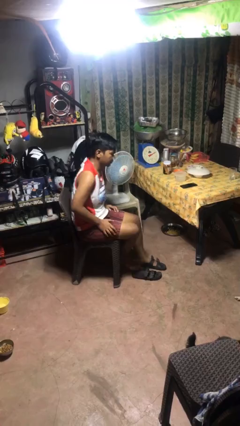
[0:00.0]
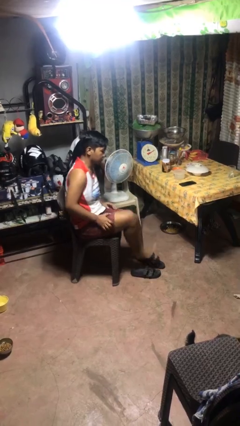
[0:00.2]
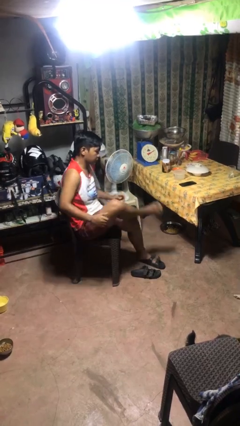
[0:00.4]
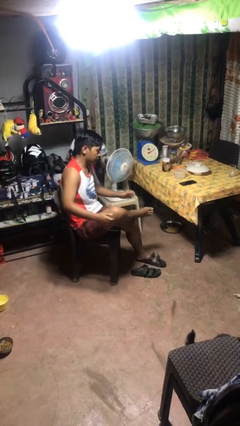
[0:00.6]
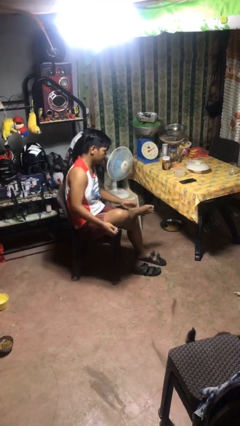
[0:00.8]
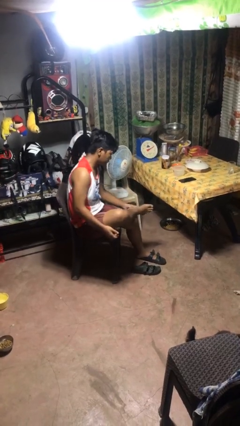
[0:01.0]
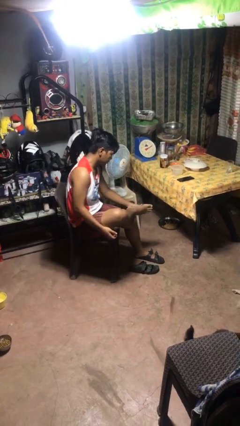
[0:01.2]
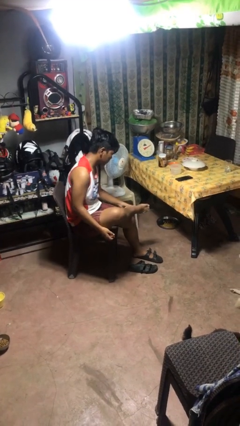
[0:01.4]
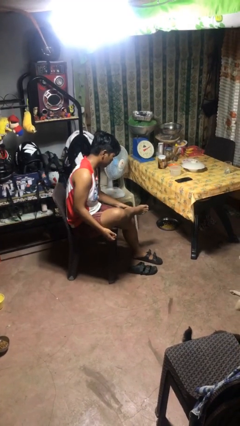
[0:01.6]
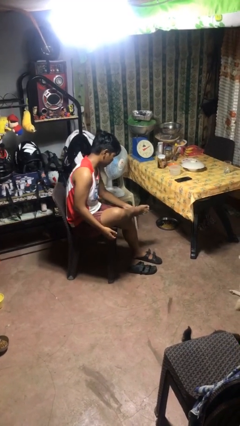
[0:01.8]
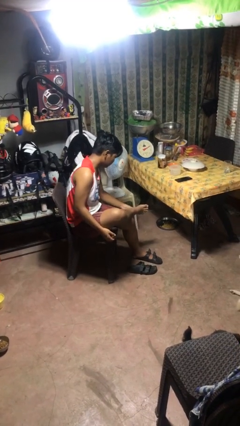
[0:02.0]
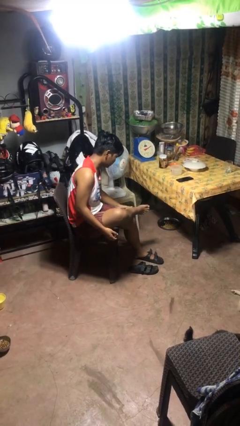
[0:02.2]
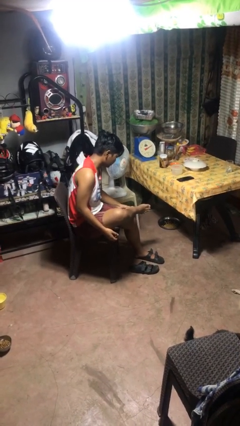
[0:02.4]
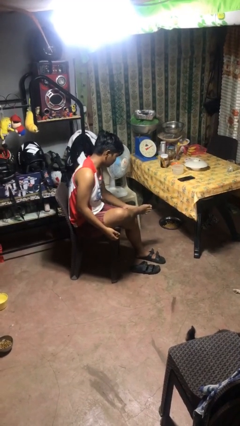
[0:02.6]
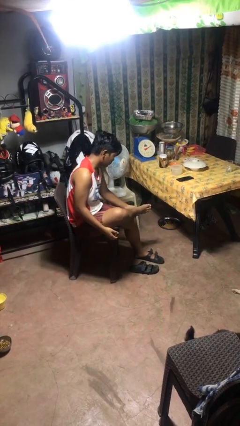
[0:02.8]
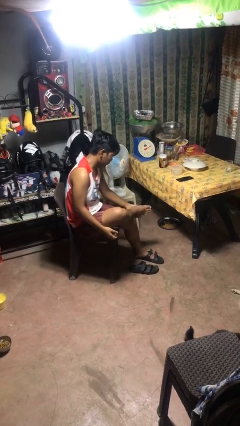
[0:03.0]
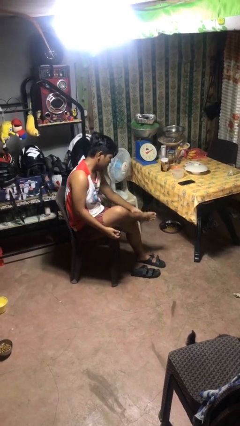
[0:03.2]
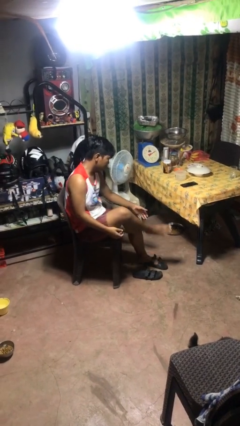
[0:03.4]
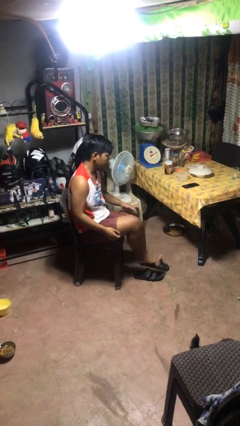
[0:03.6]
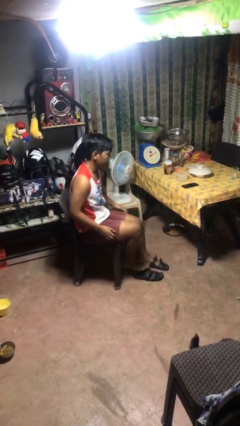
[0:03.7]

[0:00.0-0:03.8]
person rubs foot

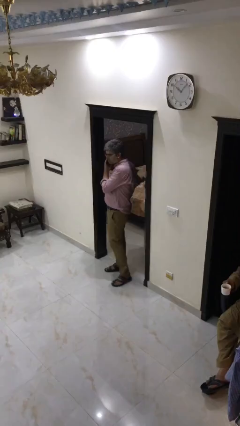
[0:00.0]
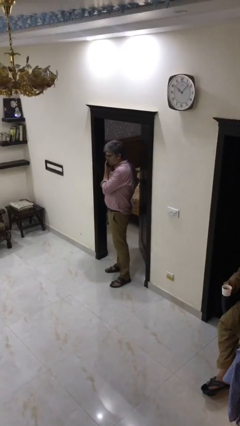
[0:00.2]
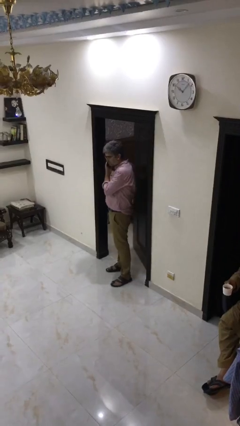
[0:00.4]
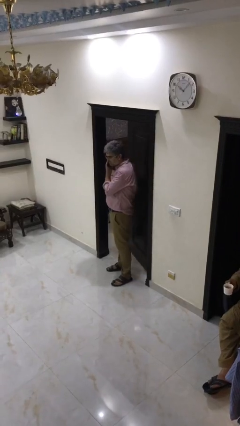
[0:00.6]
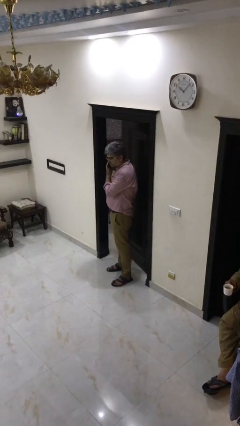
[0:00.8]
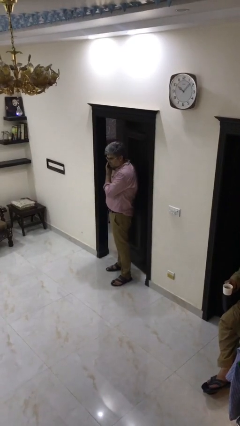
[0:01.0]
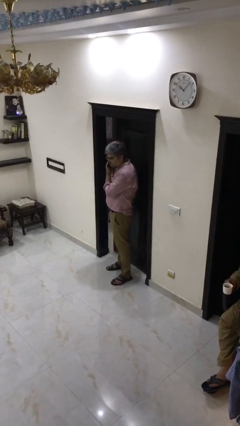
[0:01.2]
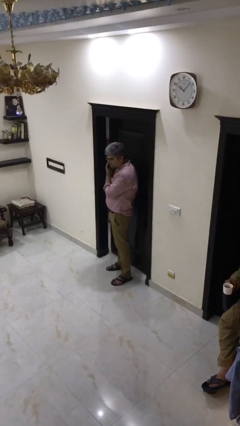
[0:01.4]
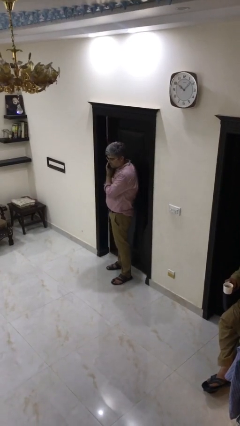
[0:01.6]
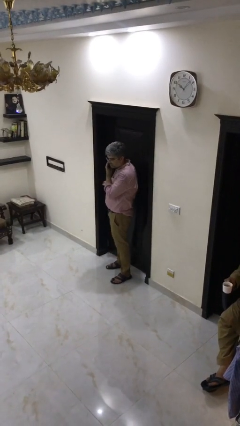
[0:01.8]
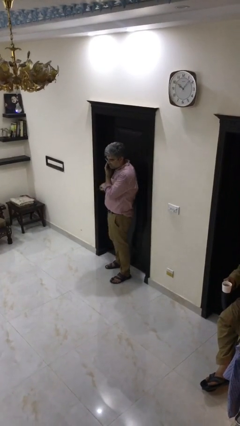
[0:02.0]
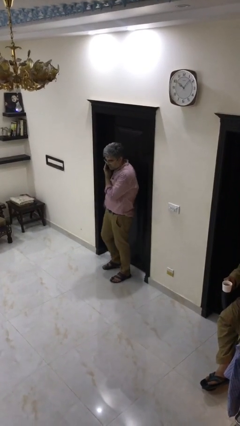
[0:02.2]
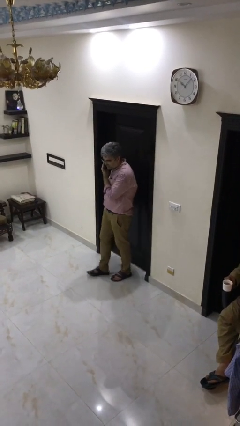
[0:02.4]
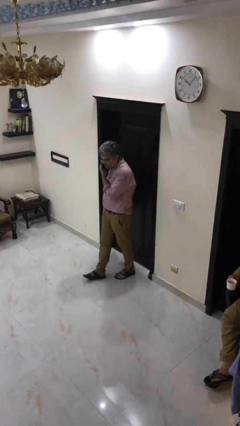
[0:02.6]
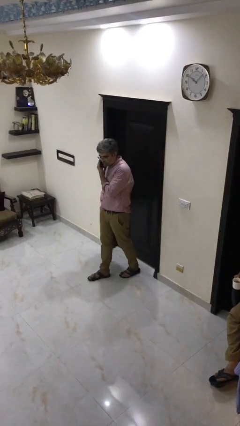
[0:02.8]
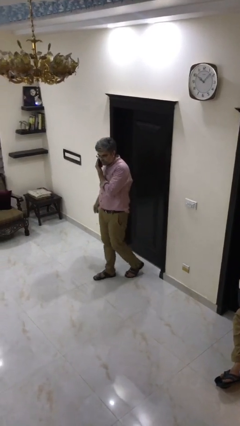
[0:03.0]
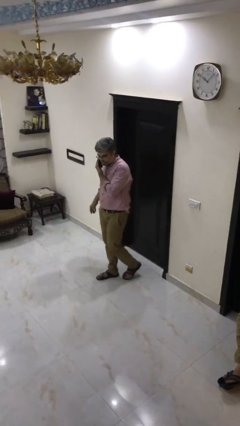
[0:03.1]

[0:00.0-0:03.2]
person closes facility door

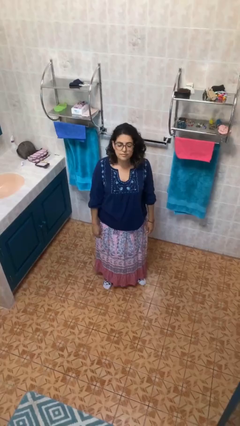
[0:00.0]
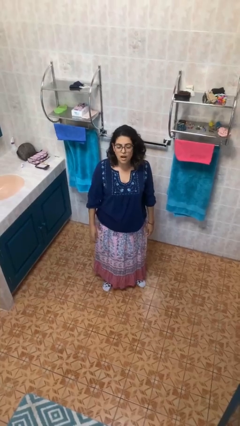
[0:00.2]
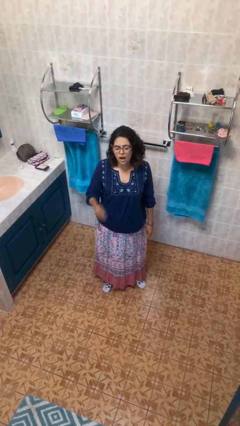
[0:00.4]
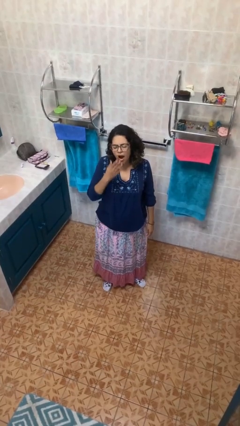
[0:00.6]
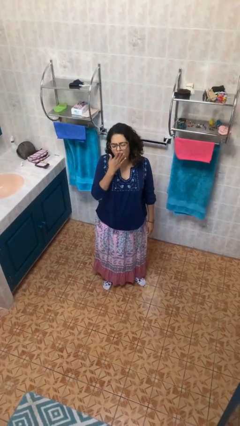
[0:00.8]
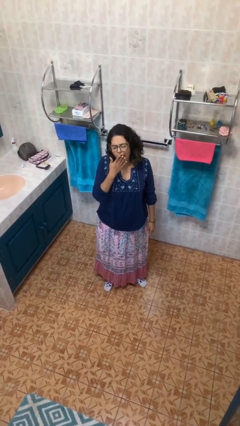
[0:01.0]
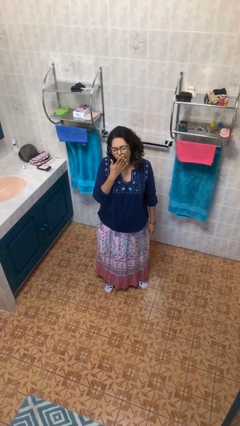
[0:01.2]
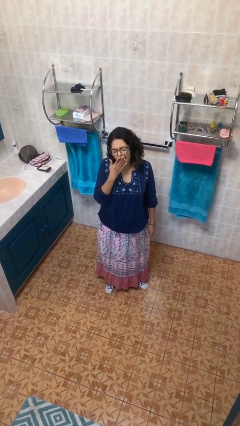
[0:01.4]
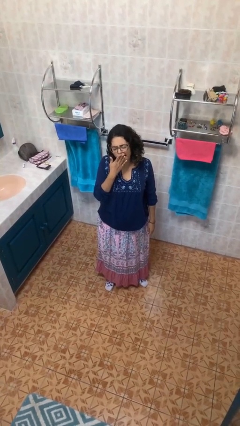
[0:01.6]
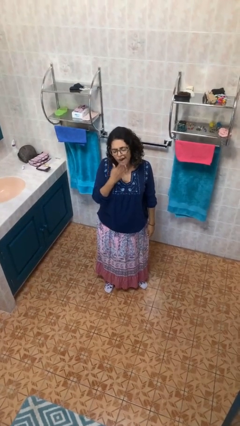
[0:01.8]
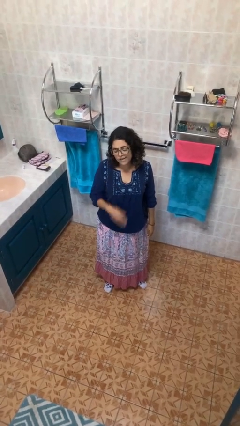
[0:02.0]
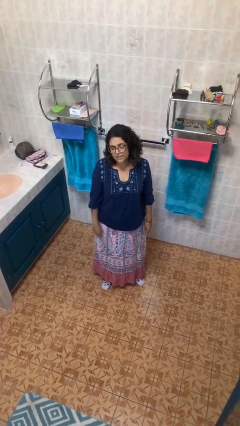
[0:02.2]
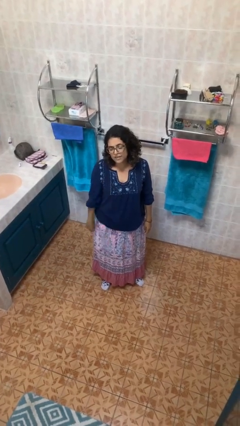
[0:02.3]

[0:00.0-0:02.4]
person yawns

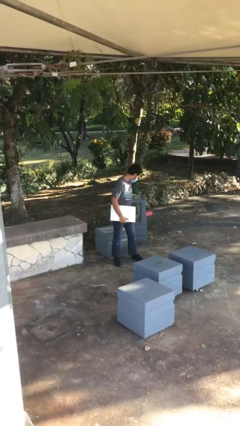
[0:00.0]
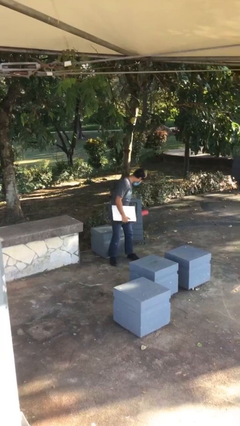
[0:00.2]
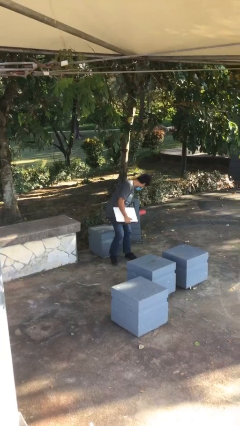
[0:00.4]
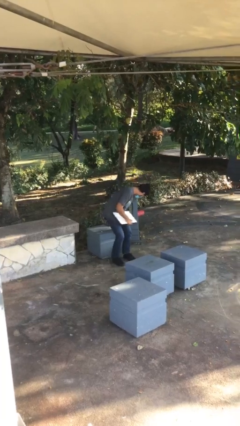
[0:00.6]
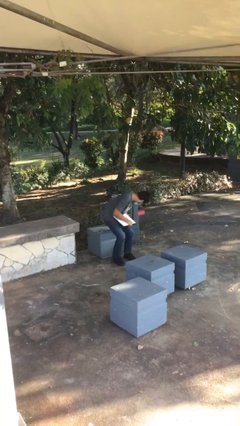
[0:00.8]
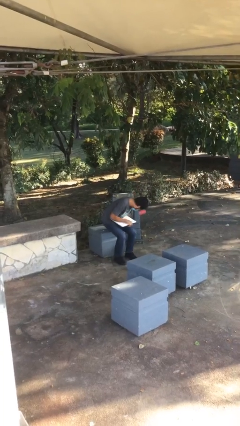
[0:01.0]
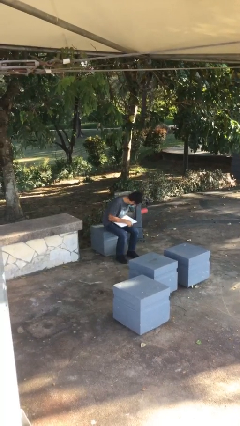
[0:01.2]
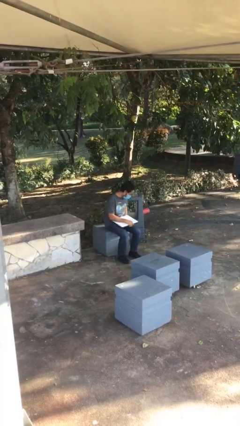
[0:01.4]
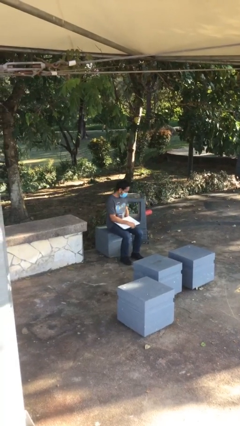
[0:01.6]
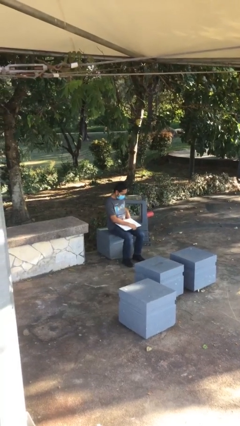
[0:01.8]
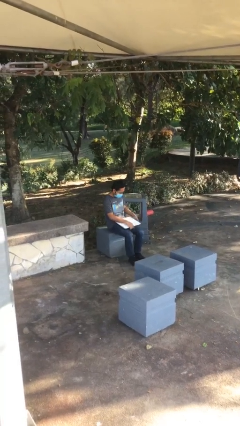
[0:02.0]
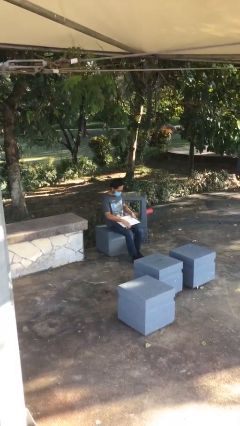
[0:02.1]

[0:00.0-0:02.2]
person sits down

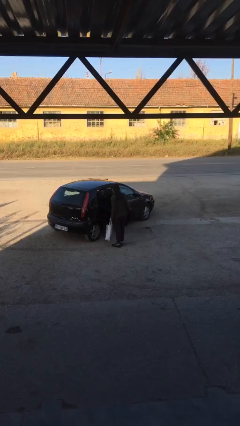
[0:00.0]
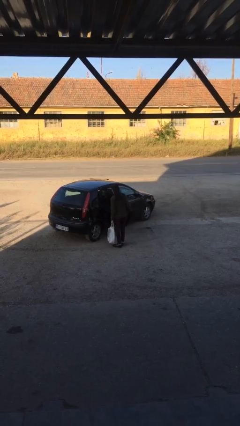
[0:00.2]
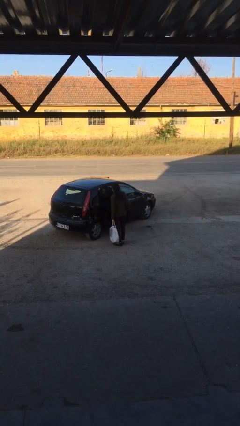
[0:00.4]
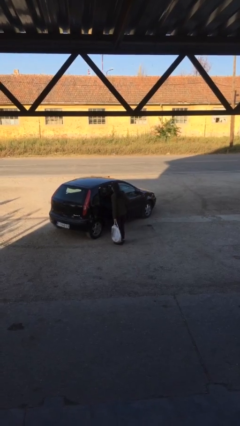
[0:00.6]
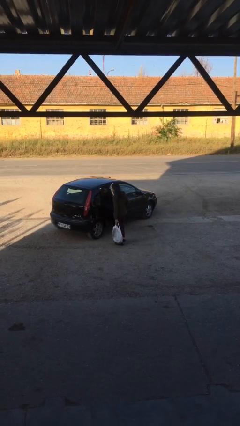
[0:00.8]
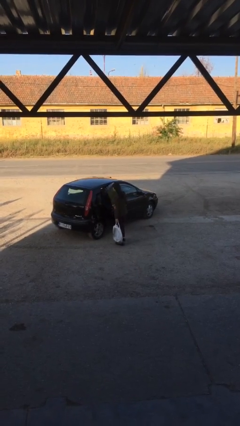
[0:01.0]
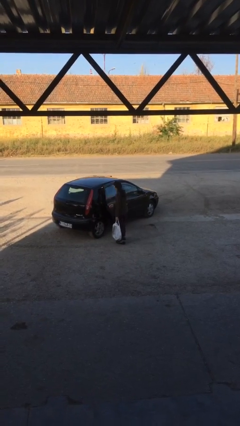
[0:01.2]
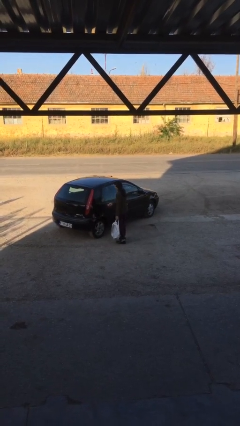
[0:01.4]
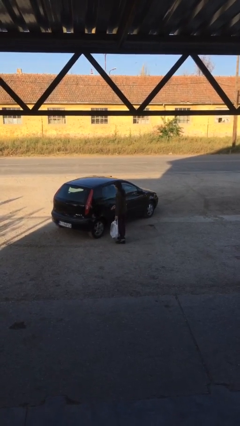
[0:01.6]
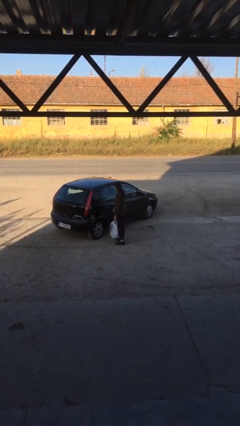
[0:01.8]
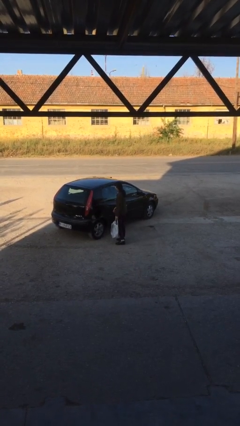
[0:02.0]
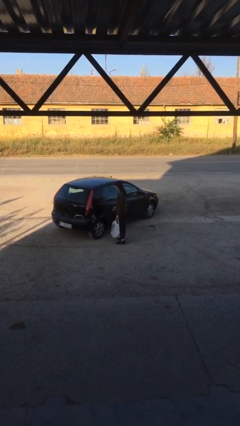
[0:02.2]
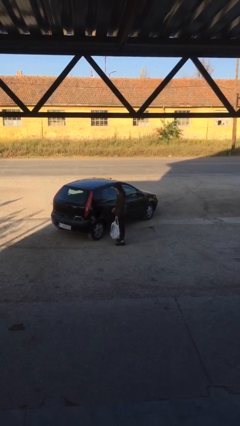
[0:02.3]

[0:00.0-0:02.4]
person closes car door

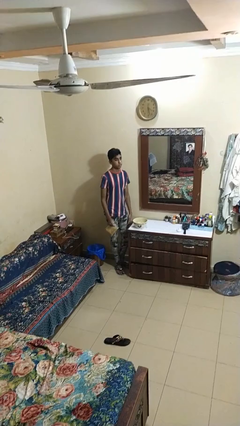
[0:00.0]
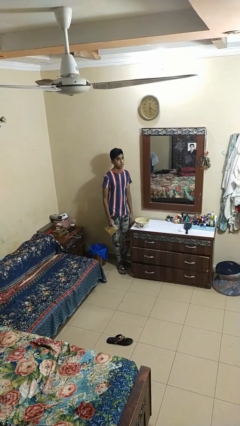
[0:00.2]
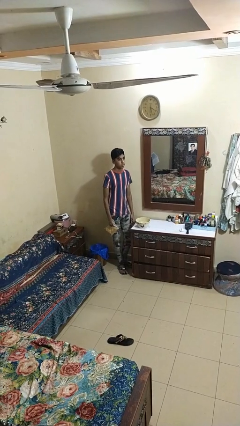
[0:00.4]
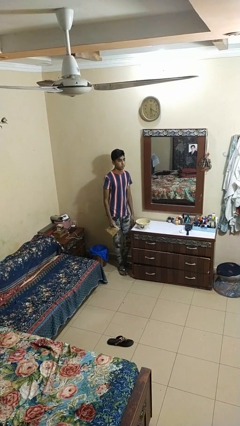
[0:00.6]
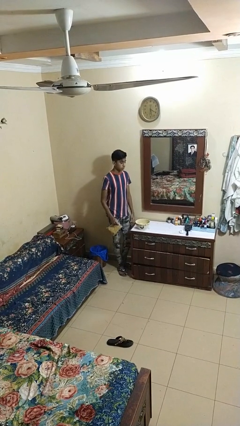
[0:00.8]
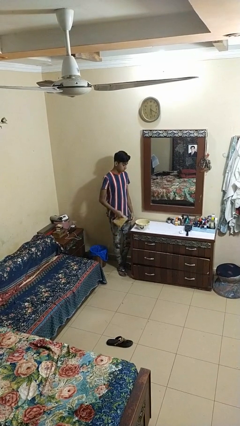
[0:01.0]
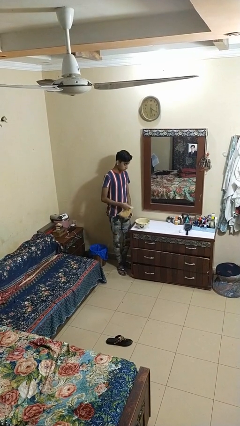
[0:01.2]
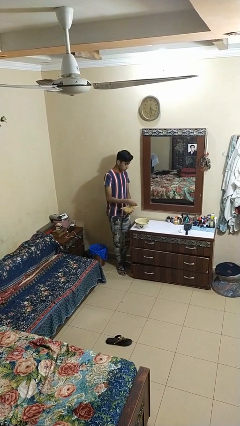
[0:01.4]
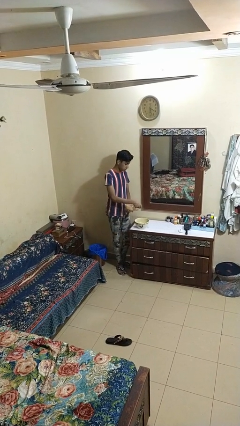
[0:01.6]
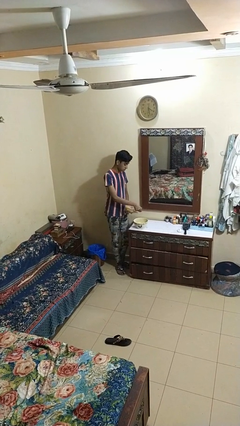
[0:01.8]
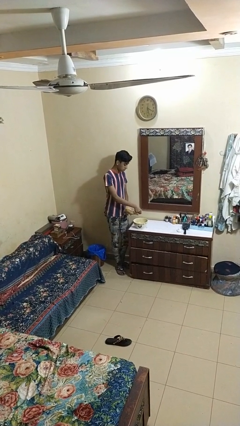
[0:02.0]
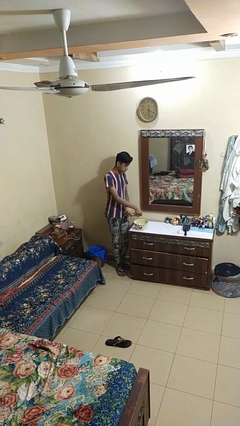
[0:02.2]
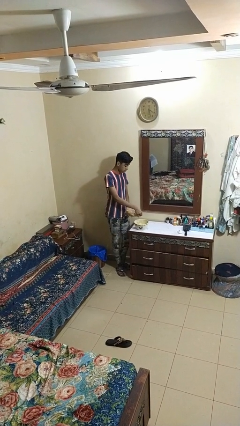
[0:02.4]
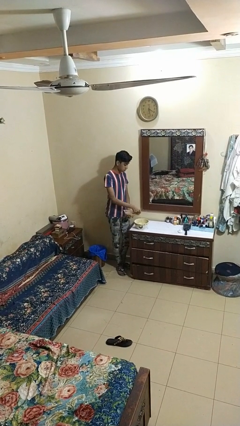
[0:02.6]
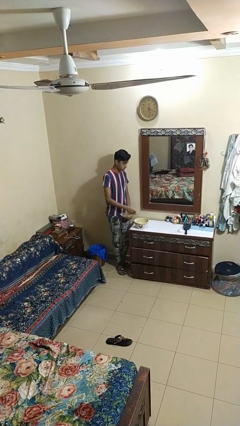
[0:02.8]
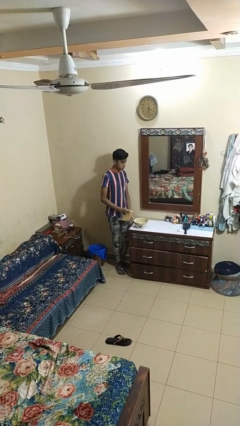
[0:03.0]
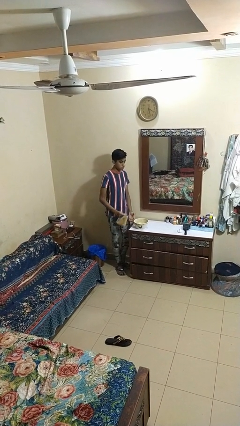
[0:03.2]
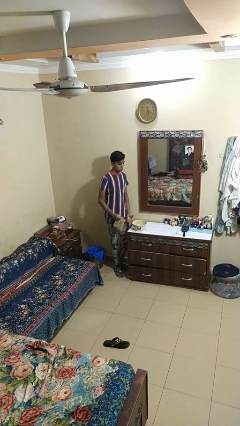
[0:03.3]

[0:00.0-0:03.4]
person pours into bowl
